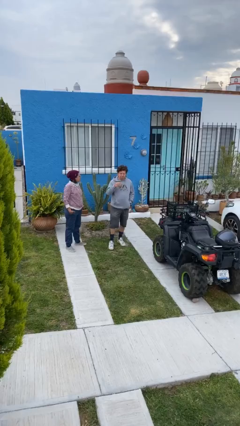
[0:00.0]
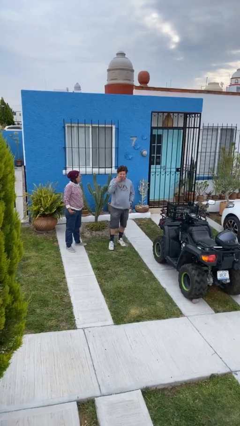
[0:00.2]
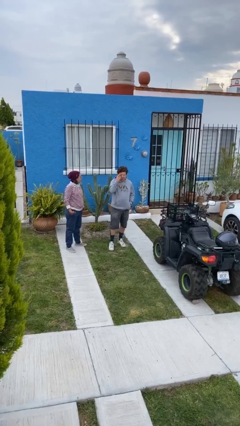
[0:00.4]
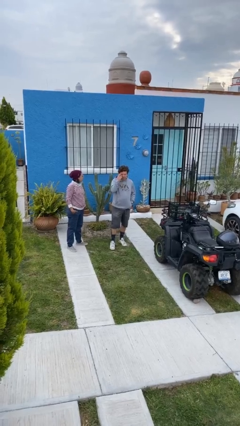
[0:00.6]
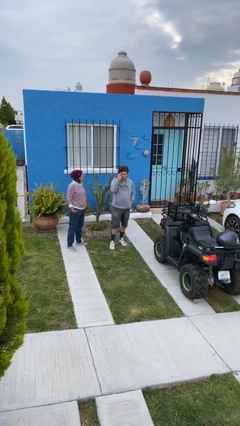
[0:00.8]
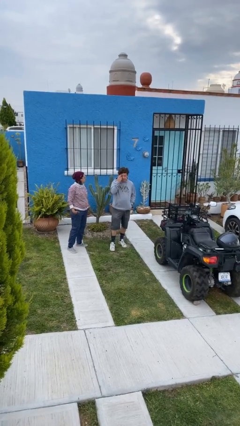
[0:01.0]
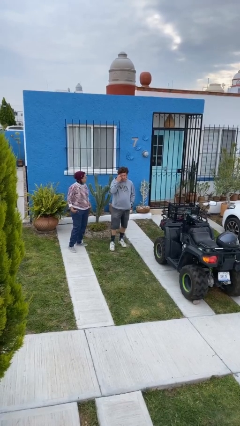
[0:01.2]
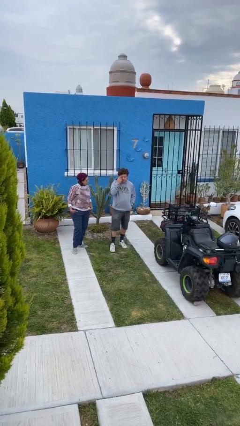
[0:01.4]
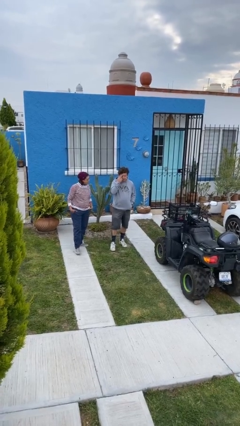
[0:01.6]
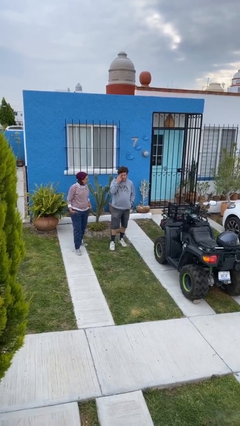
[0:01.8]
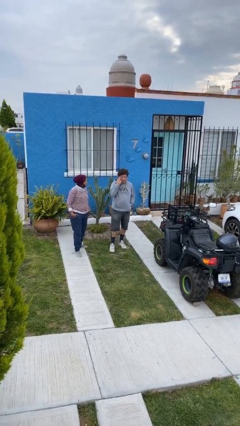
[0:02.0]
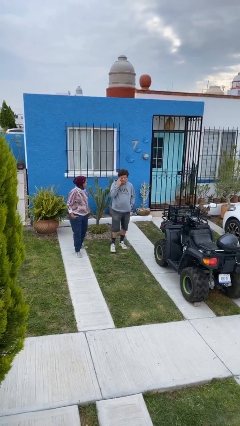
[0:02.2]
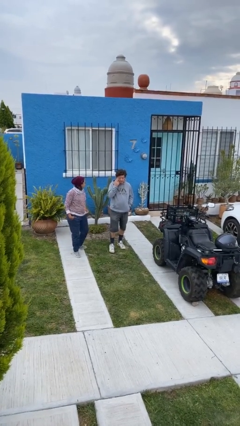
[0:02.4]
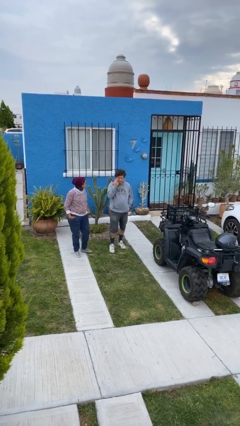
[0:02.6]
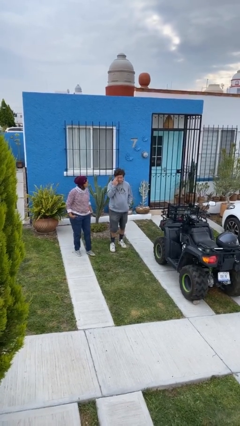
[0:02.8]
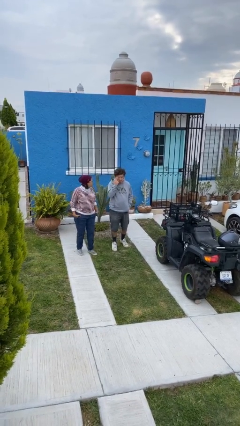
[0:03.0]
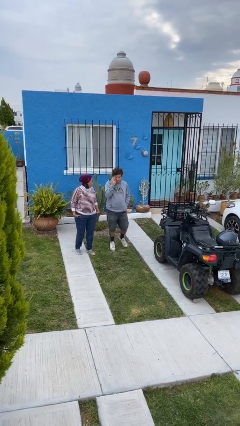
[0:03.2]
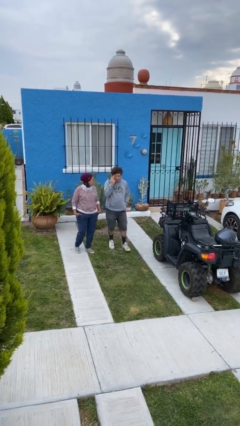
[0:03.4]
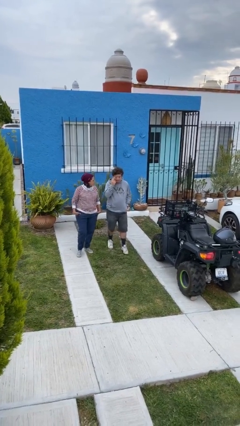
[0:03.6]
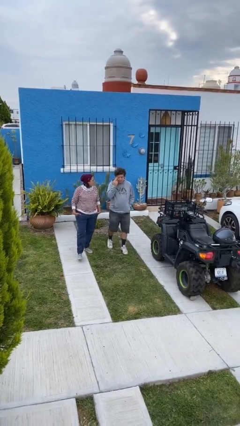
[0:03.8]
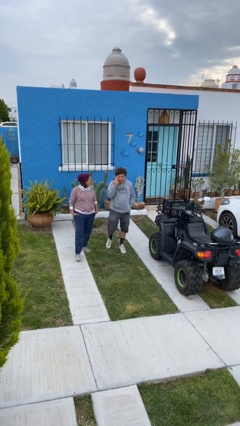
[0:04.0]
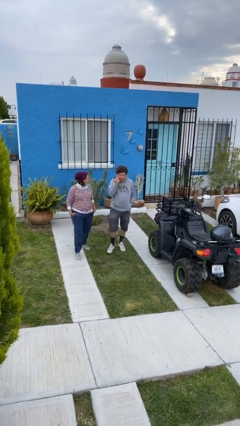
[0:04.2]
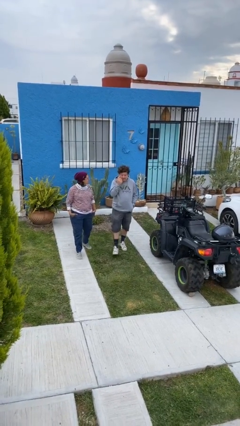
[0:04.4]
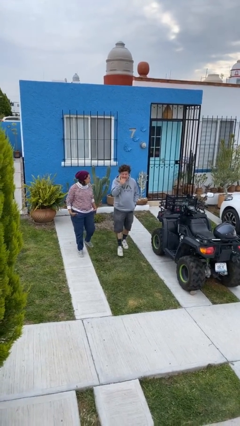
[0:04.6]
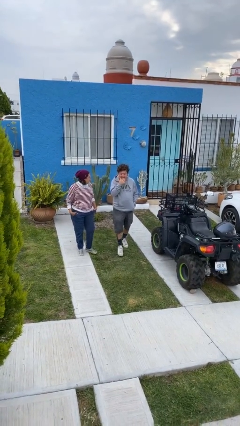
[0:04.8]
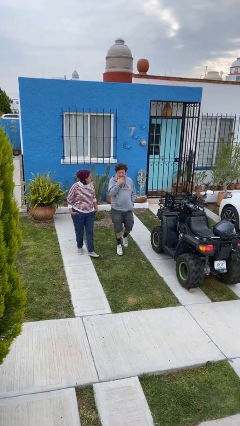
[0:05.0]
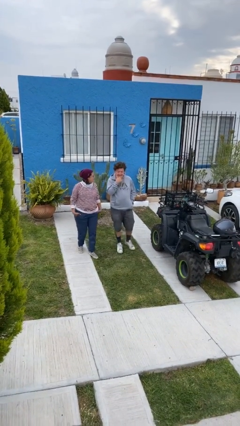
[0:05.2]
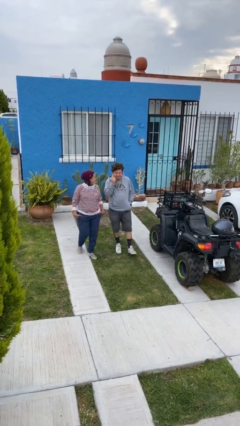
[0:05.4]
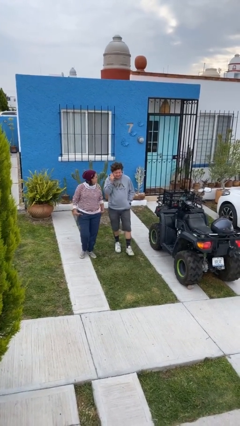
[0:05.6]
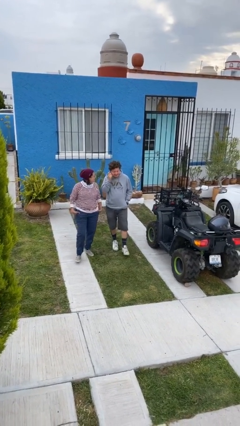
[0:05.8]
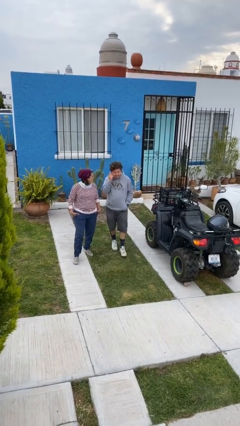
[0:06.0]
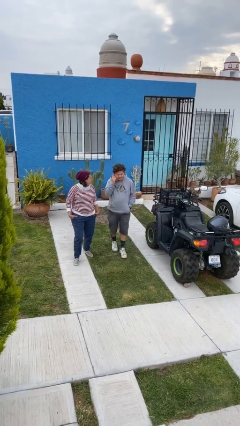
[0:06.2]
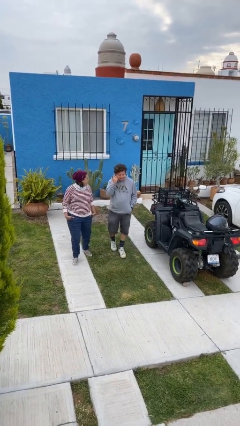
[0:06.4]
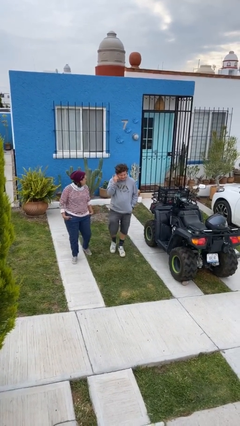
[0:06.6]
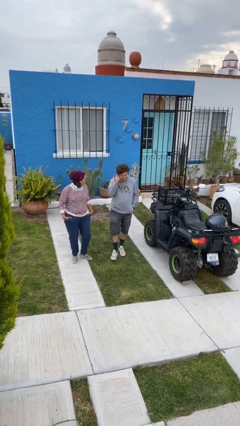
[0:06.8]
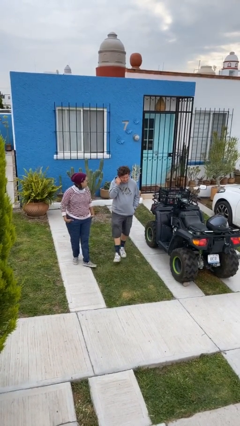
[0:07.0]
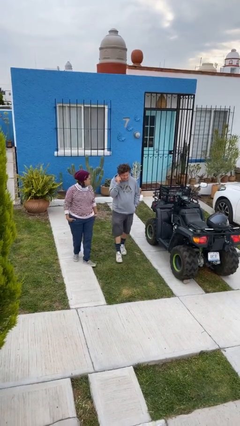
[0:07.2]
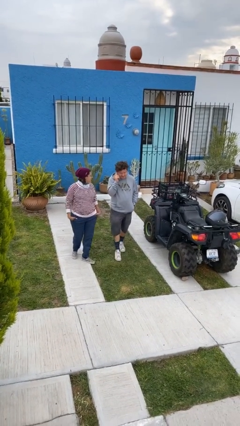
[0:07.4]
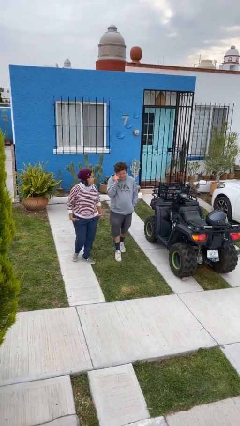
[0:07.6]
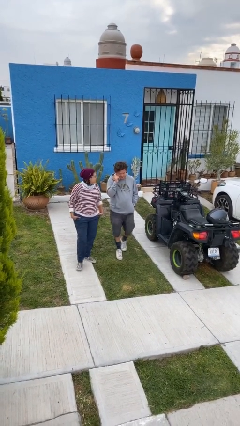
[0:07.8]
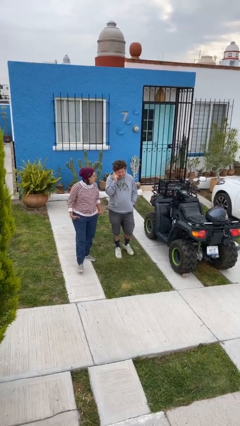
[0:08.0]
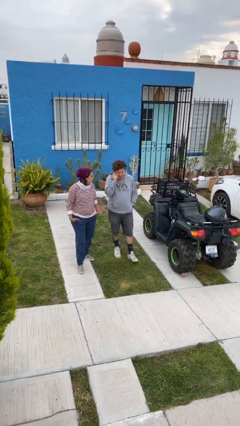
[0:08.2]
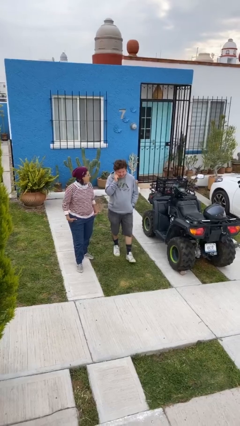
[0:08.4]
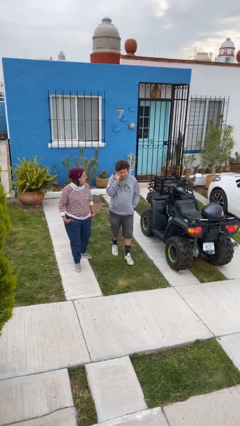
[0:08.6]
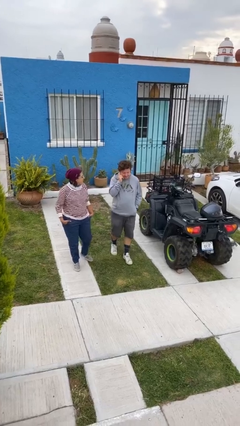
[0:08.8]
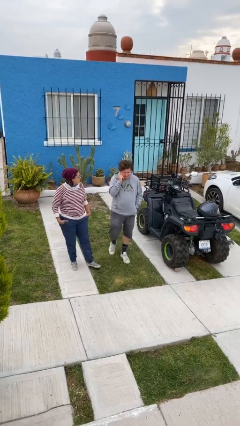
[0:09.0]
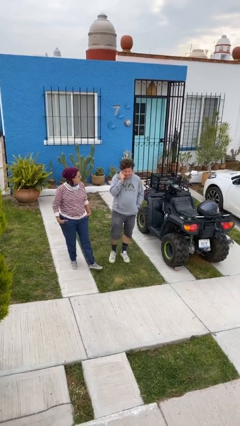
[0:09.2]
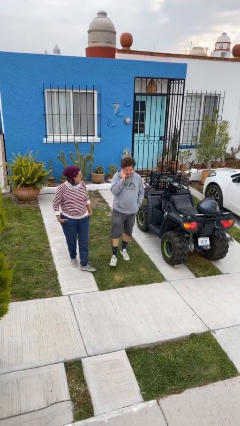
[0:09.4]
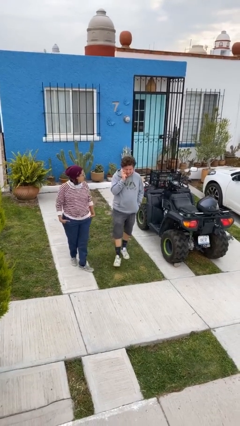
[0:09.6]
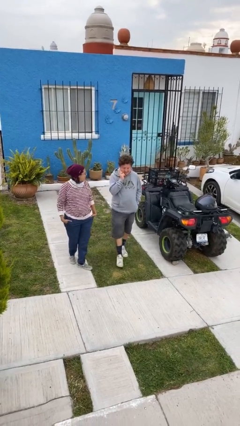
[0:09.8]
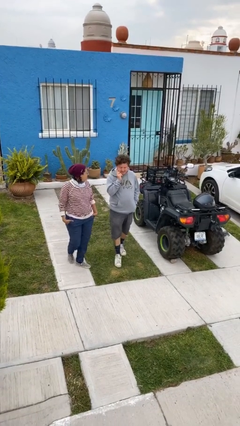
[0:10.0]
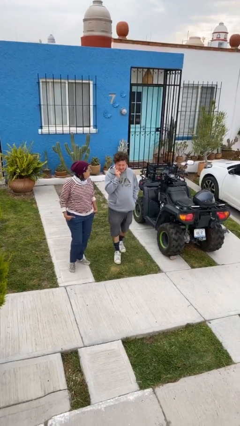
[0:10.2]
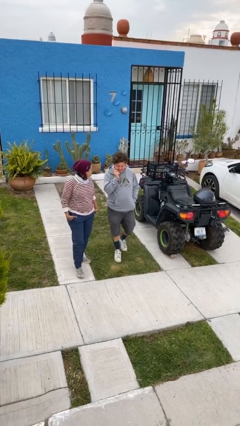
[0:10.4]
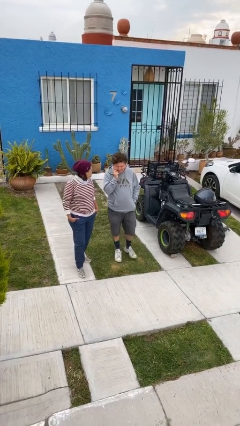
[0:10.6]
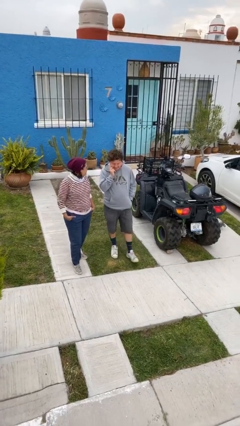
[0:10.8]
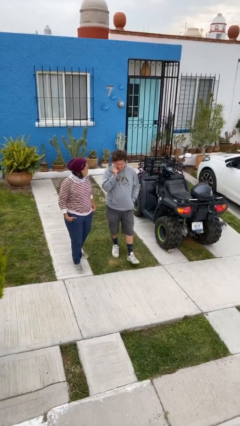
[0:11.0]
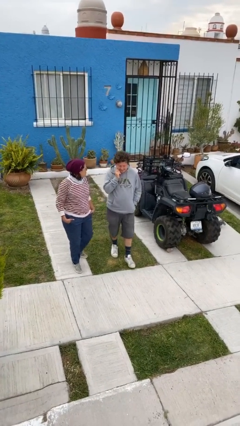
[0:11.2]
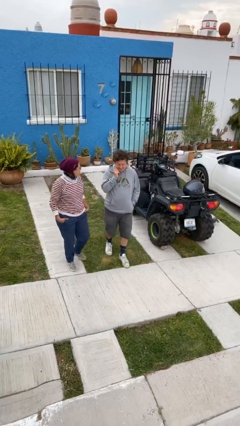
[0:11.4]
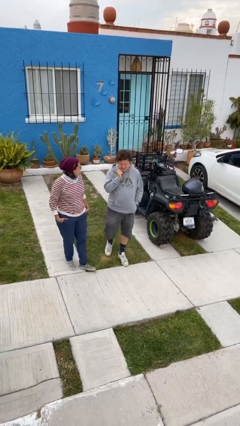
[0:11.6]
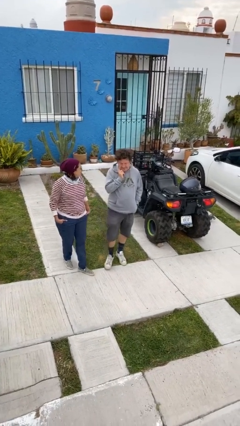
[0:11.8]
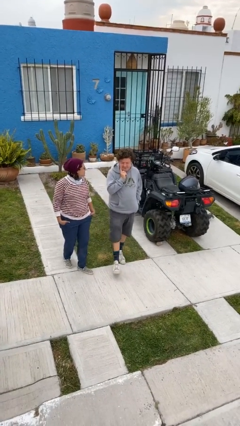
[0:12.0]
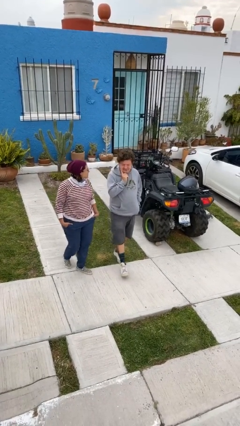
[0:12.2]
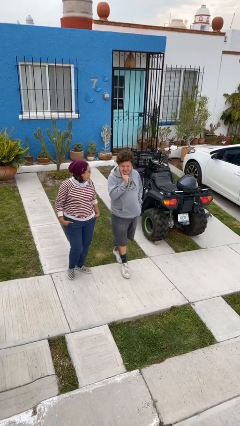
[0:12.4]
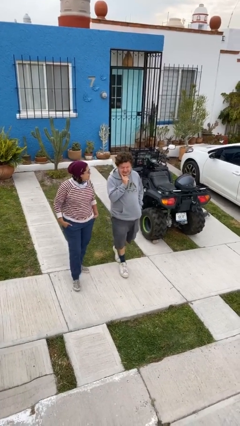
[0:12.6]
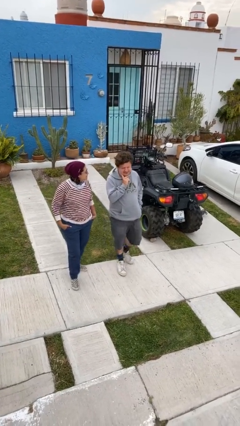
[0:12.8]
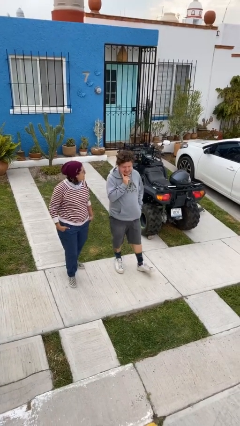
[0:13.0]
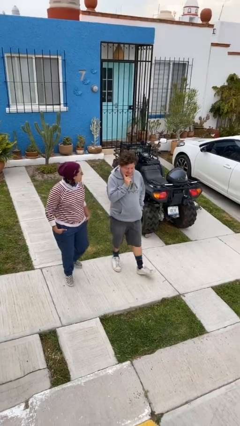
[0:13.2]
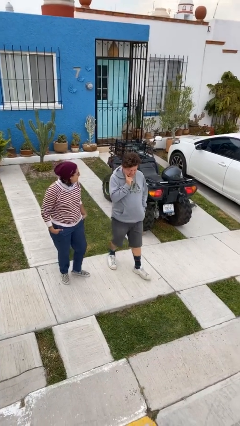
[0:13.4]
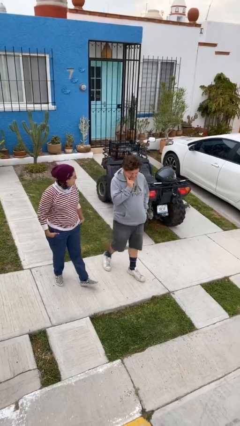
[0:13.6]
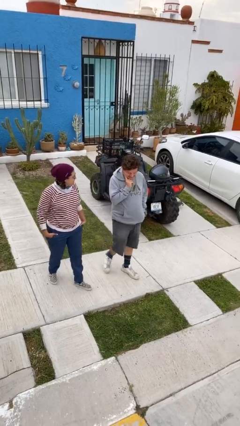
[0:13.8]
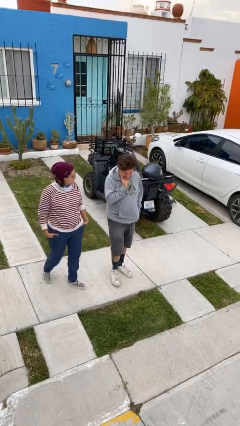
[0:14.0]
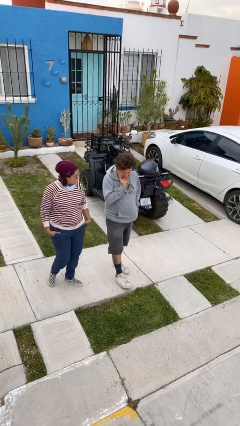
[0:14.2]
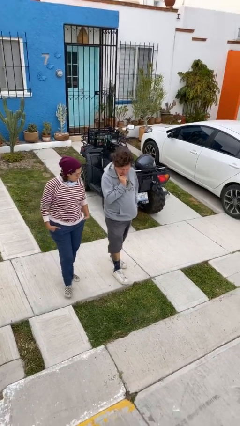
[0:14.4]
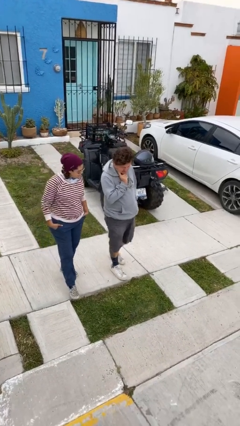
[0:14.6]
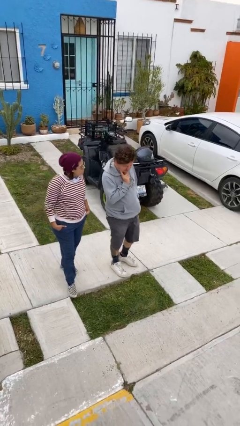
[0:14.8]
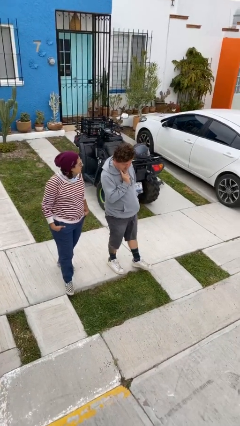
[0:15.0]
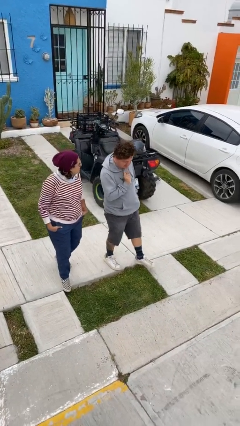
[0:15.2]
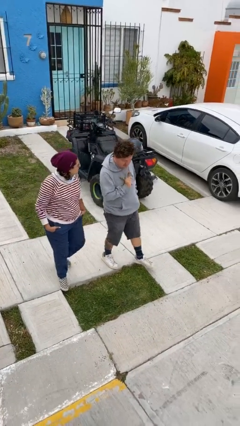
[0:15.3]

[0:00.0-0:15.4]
person talks to person

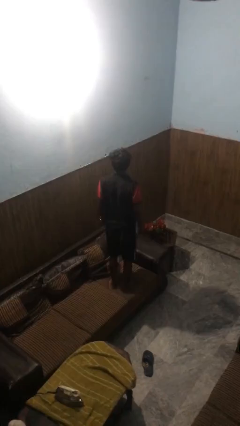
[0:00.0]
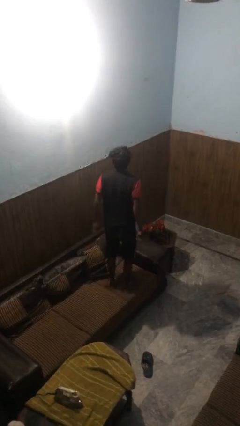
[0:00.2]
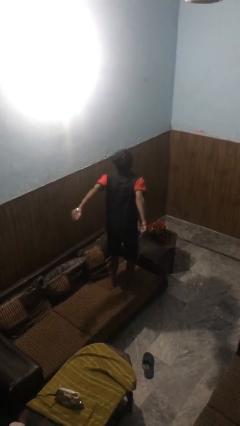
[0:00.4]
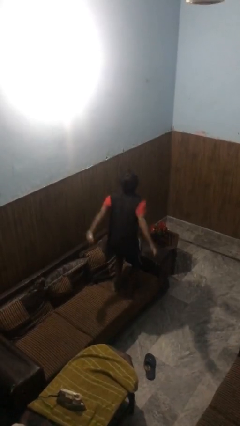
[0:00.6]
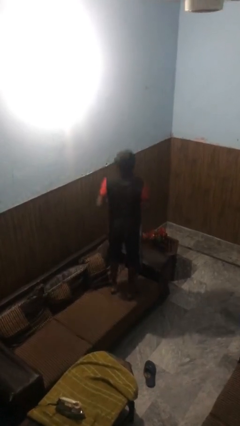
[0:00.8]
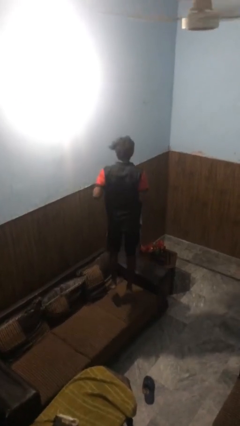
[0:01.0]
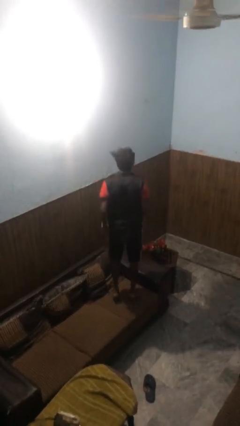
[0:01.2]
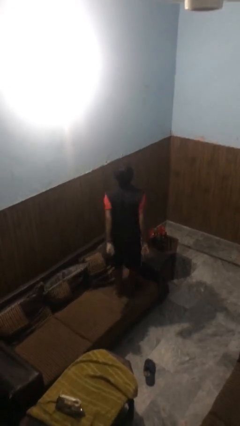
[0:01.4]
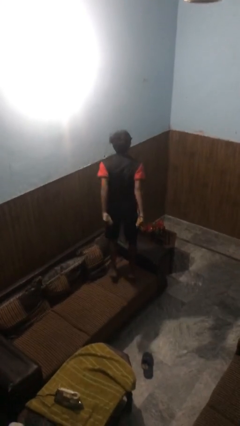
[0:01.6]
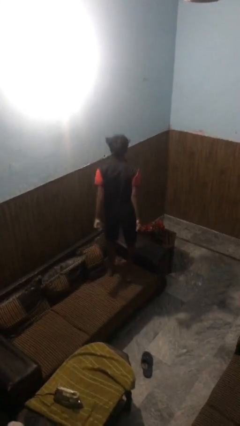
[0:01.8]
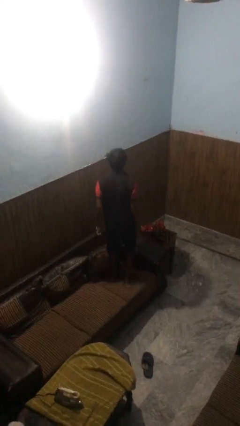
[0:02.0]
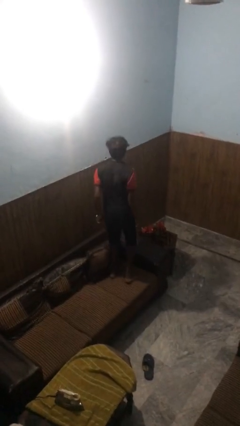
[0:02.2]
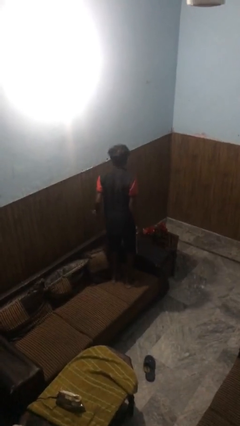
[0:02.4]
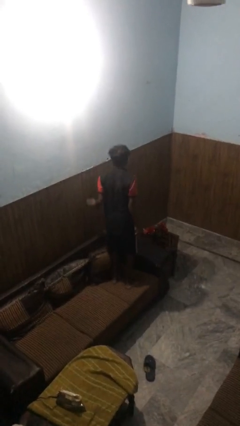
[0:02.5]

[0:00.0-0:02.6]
person jumps on couch

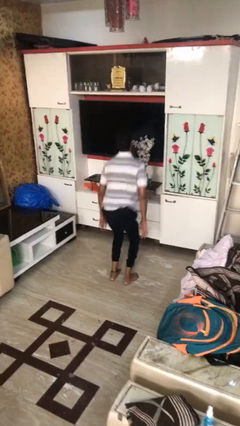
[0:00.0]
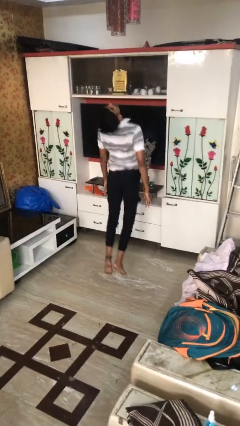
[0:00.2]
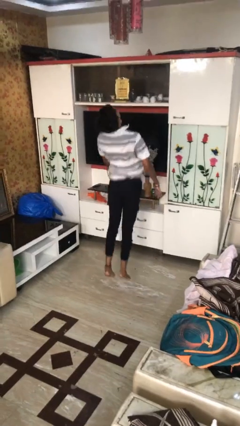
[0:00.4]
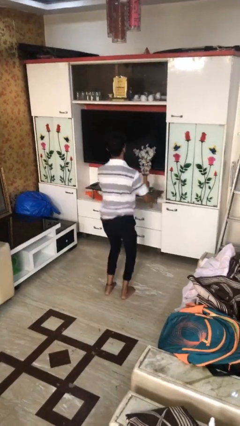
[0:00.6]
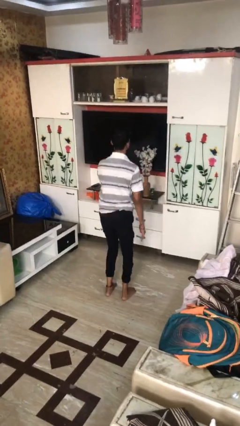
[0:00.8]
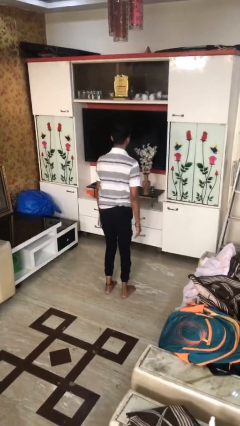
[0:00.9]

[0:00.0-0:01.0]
person somersaults
